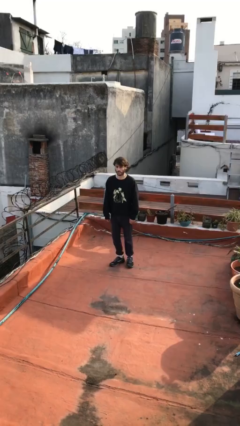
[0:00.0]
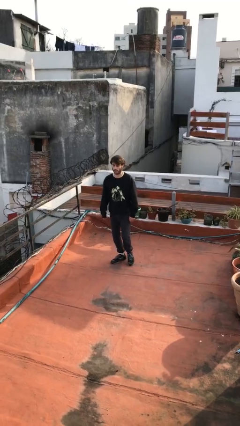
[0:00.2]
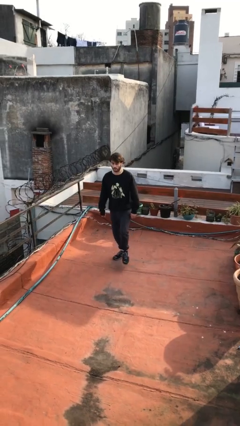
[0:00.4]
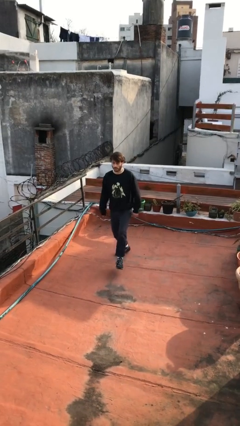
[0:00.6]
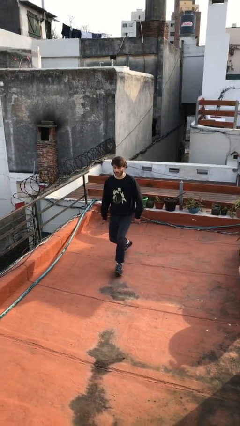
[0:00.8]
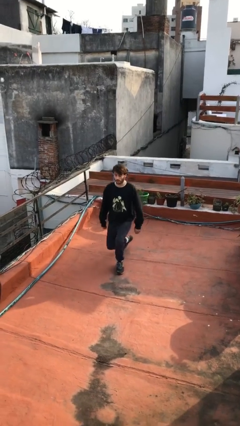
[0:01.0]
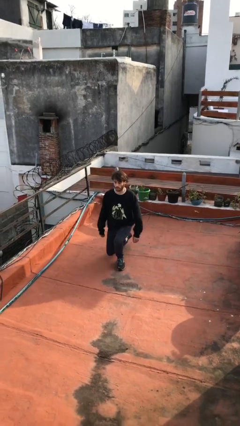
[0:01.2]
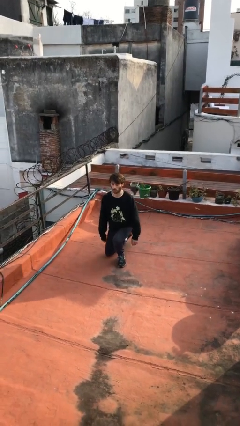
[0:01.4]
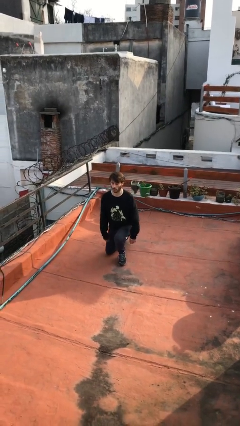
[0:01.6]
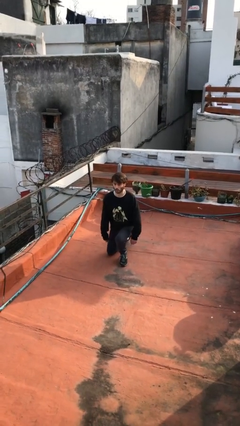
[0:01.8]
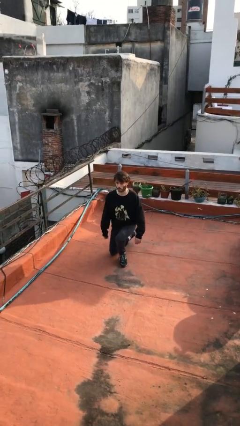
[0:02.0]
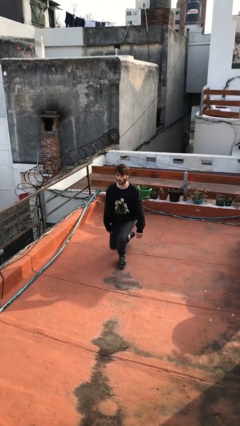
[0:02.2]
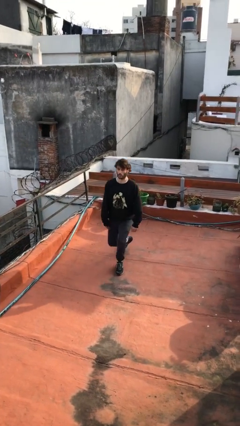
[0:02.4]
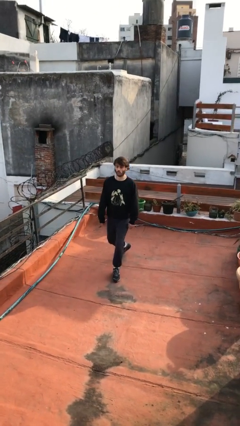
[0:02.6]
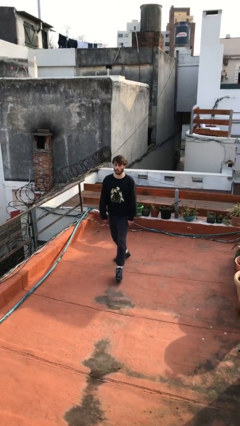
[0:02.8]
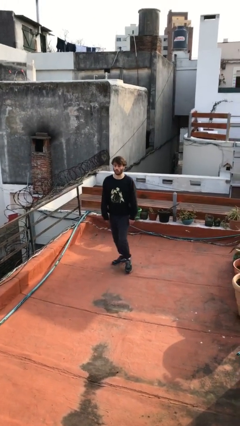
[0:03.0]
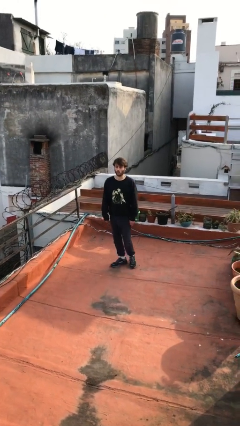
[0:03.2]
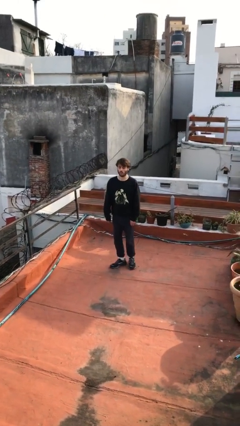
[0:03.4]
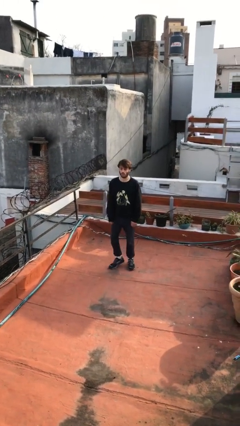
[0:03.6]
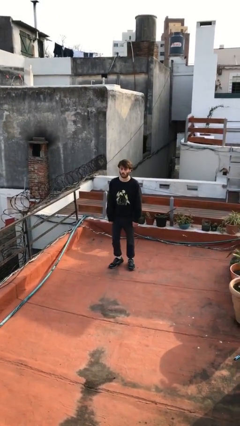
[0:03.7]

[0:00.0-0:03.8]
person exercises with lunges

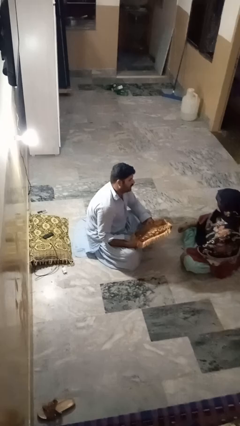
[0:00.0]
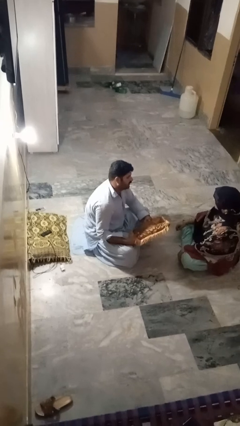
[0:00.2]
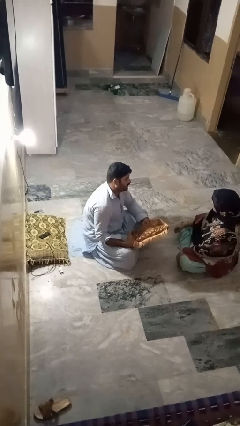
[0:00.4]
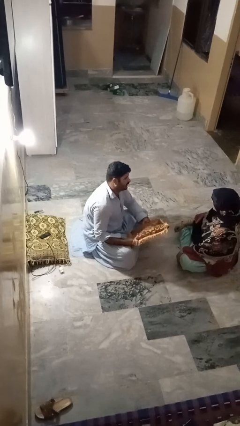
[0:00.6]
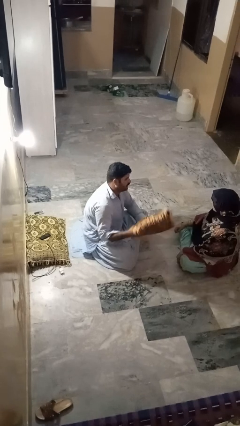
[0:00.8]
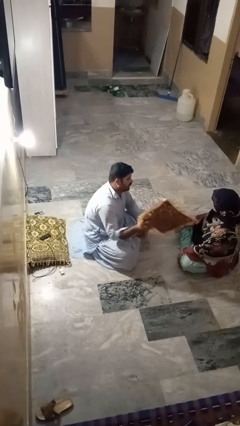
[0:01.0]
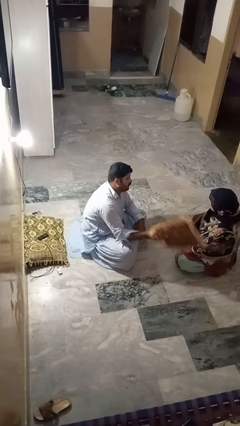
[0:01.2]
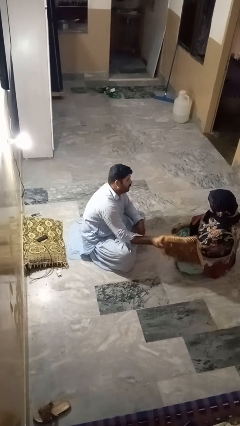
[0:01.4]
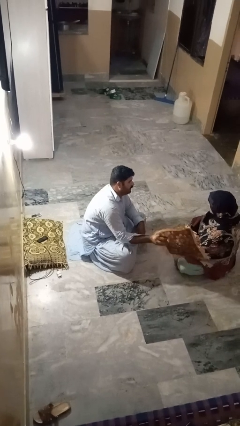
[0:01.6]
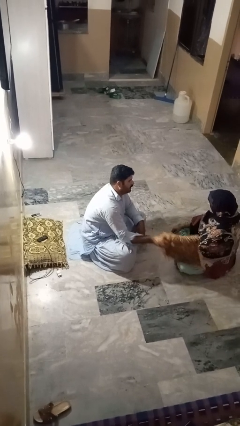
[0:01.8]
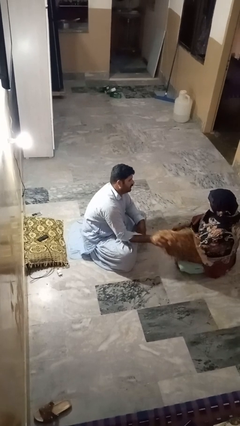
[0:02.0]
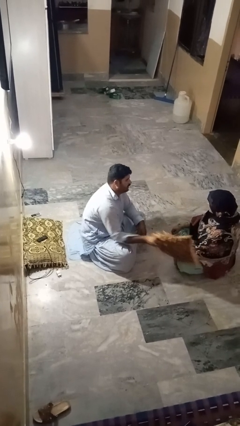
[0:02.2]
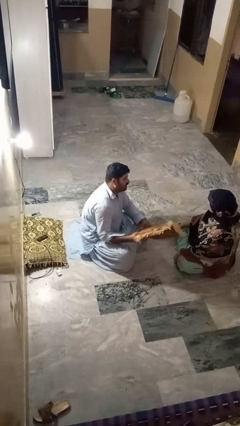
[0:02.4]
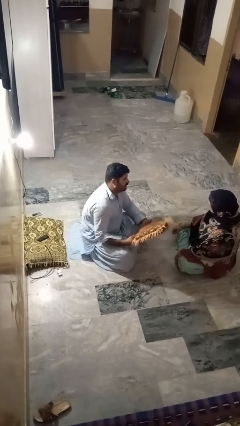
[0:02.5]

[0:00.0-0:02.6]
person hits person with pillow

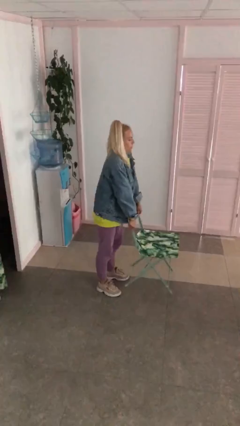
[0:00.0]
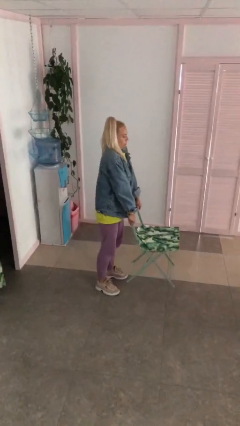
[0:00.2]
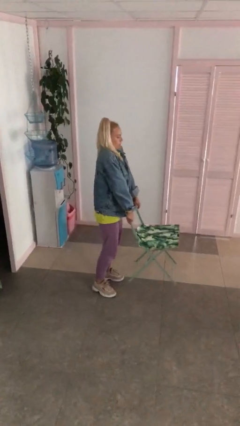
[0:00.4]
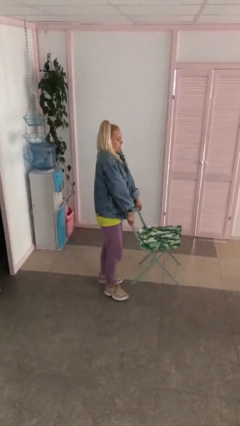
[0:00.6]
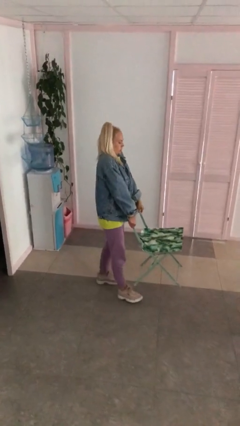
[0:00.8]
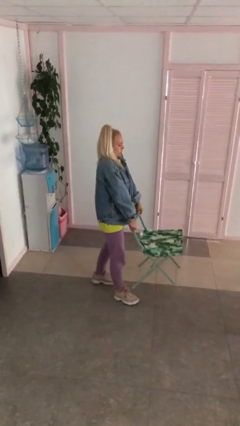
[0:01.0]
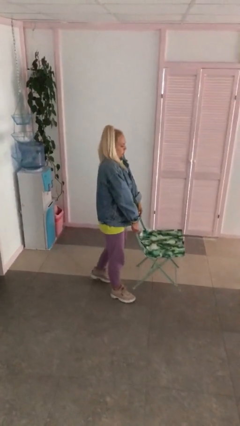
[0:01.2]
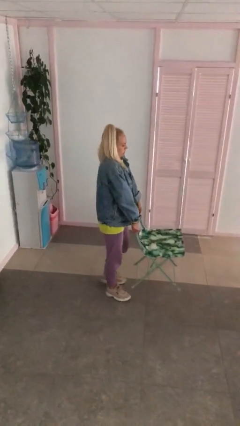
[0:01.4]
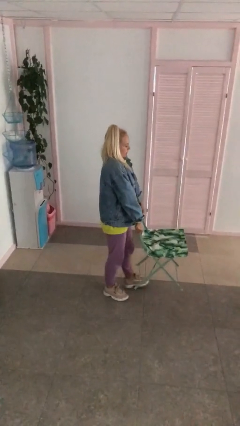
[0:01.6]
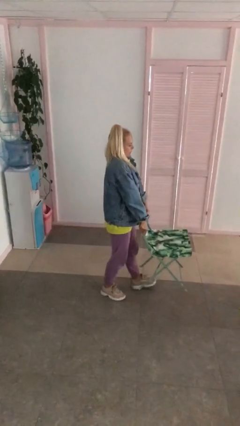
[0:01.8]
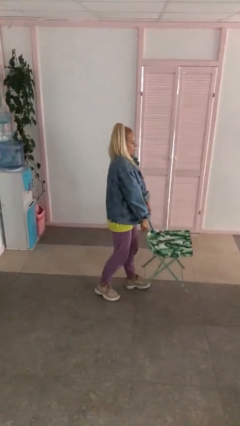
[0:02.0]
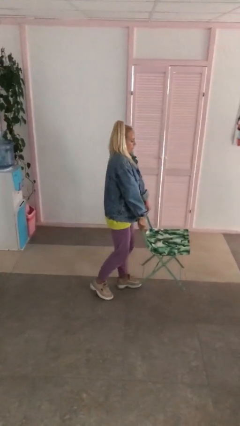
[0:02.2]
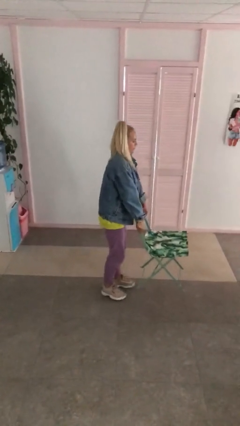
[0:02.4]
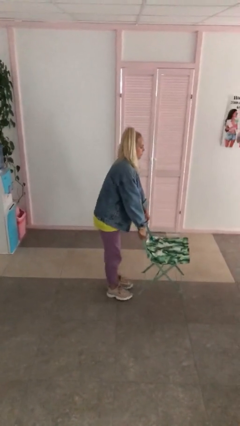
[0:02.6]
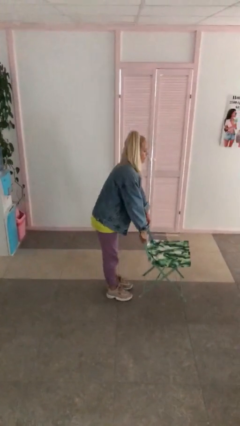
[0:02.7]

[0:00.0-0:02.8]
person carries heavy object

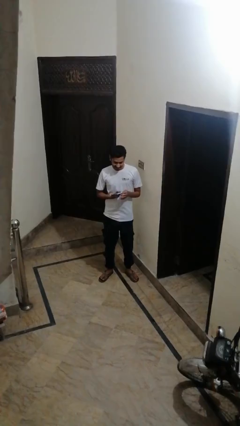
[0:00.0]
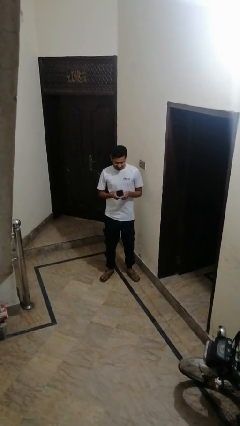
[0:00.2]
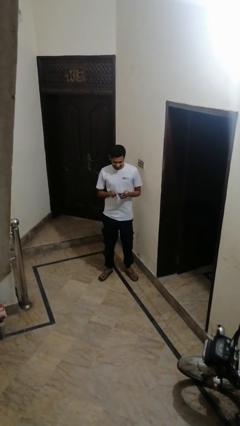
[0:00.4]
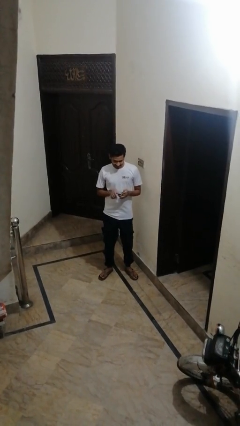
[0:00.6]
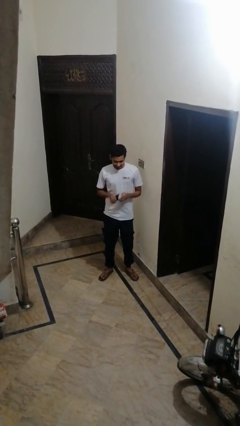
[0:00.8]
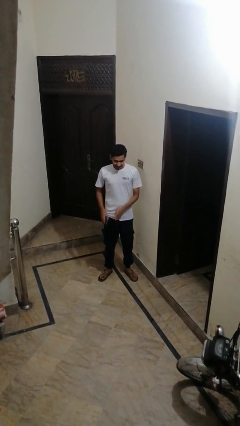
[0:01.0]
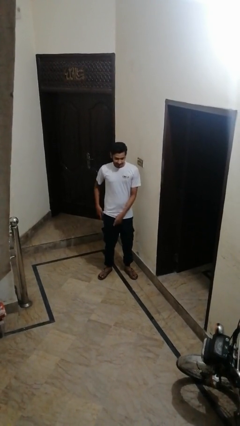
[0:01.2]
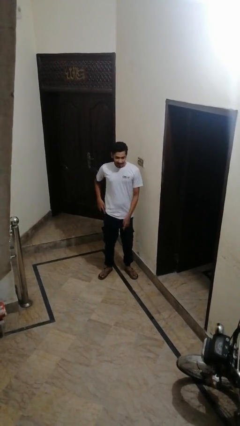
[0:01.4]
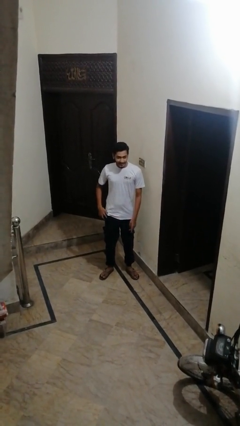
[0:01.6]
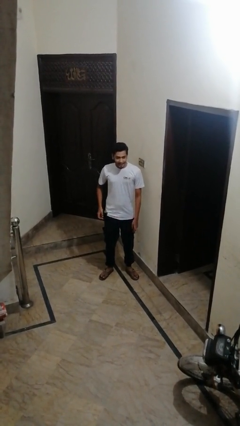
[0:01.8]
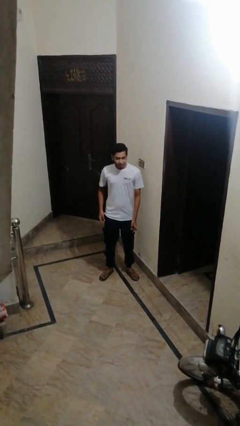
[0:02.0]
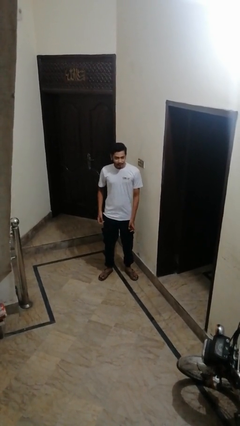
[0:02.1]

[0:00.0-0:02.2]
person shoves person

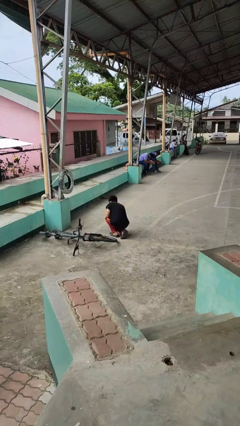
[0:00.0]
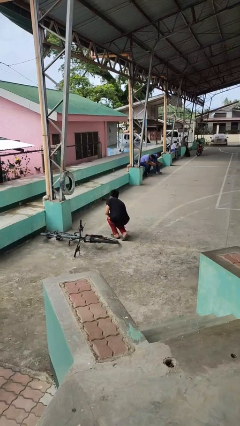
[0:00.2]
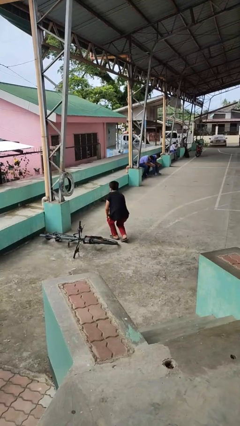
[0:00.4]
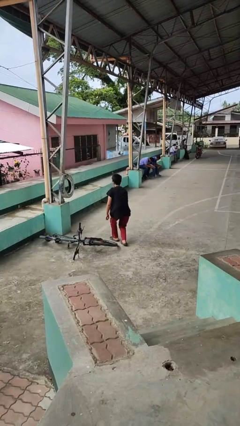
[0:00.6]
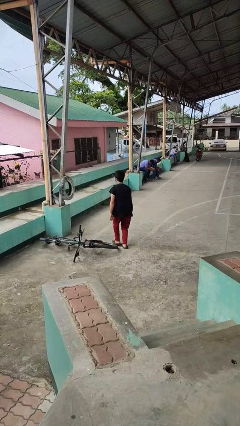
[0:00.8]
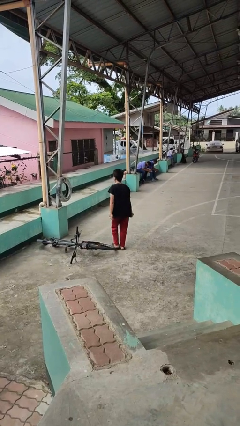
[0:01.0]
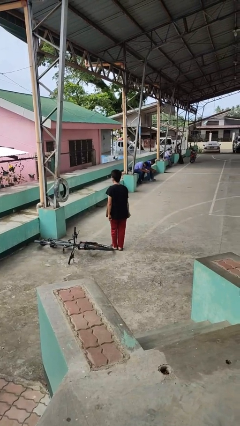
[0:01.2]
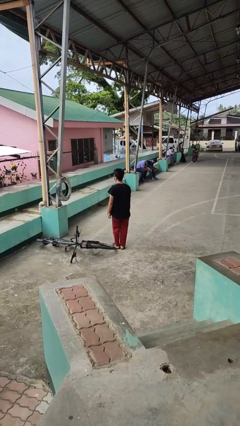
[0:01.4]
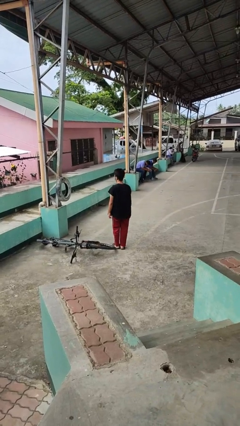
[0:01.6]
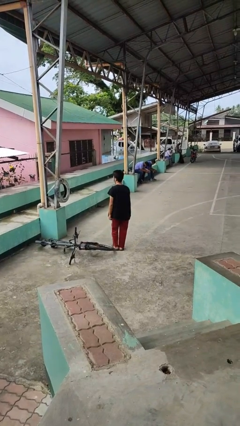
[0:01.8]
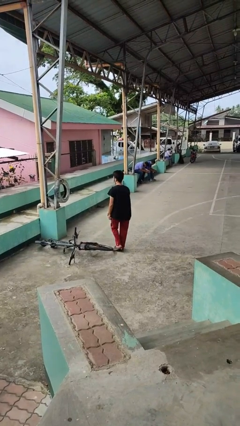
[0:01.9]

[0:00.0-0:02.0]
person stands up from floor

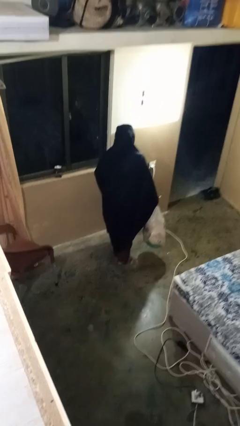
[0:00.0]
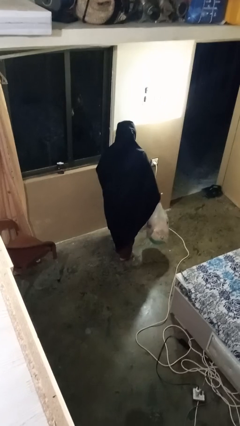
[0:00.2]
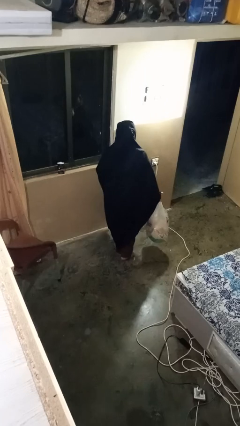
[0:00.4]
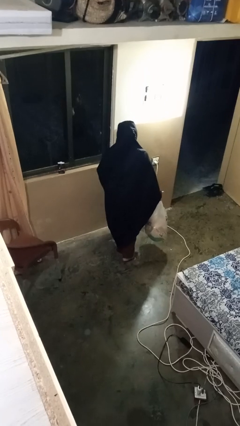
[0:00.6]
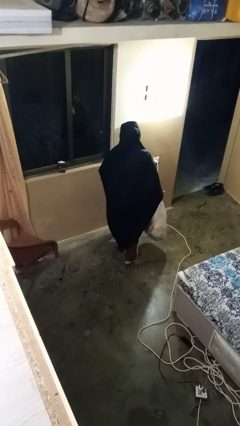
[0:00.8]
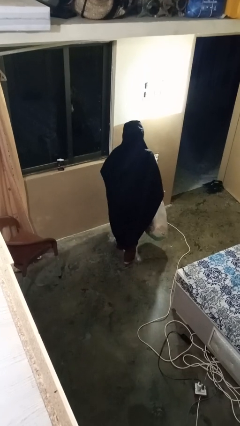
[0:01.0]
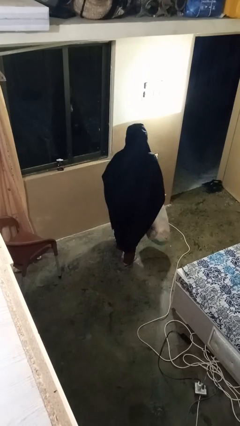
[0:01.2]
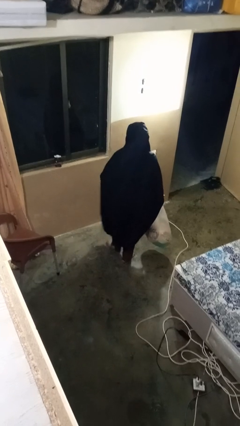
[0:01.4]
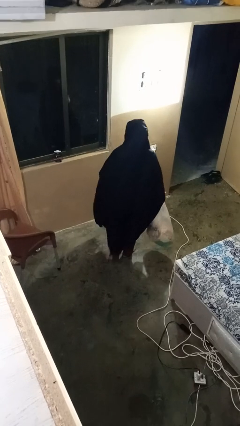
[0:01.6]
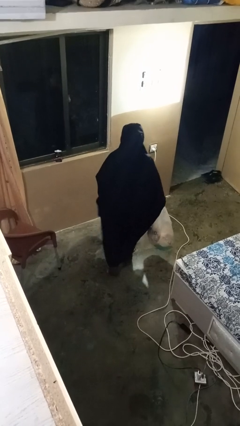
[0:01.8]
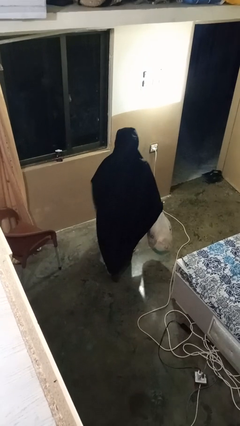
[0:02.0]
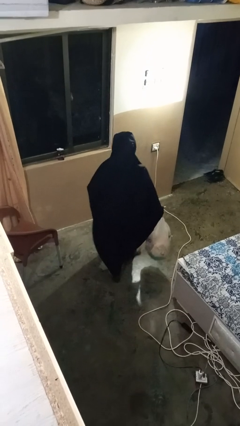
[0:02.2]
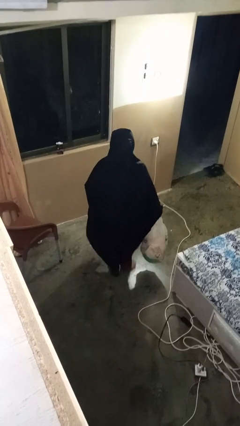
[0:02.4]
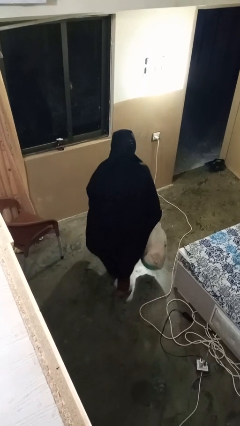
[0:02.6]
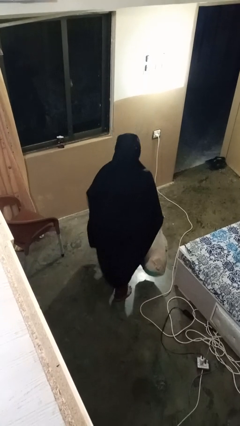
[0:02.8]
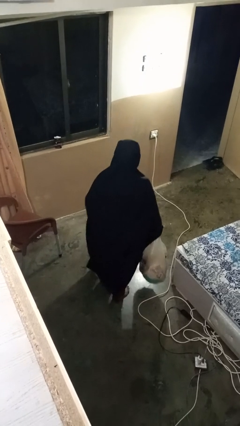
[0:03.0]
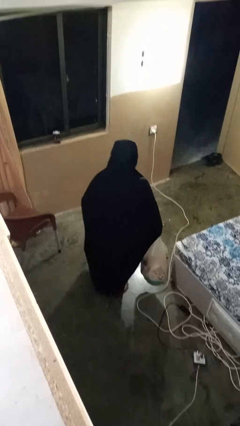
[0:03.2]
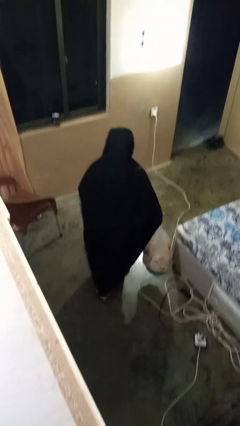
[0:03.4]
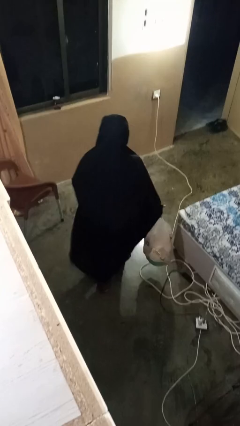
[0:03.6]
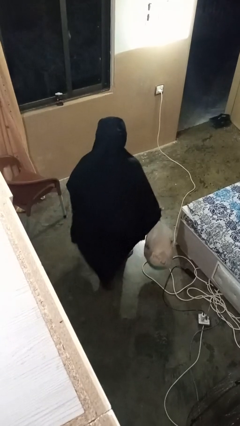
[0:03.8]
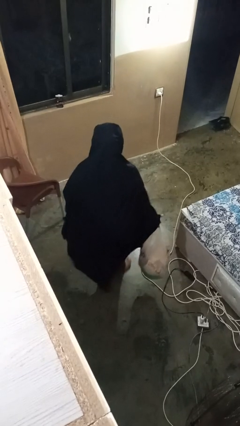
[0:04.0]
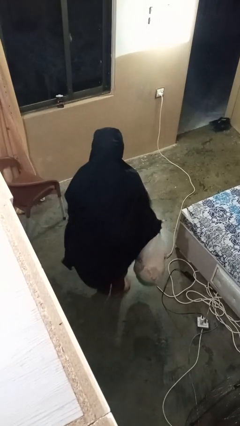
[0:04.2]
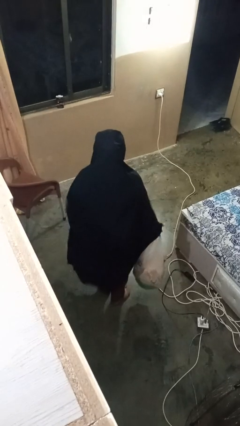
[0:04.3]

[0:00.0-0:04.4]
person carries groceries
